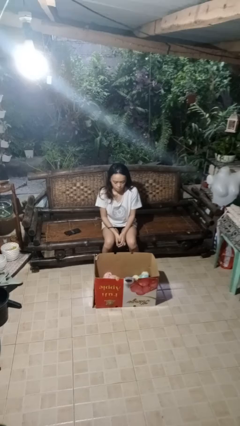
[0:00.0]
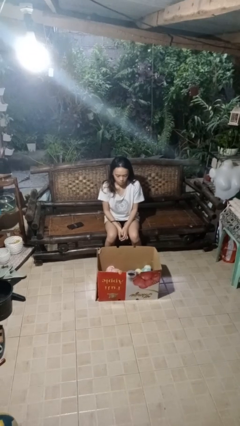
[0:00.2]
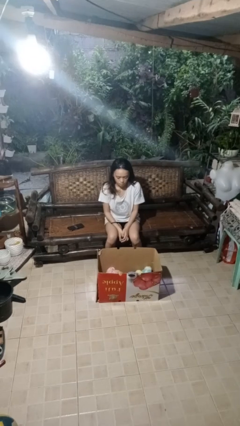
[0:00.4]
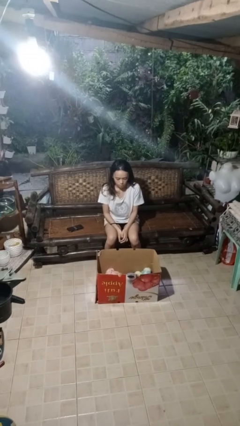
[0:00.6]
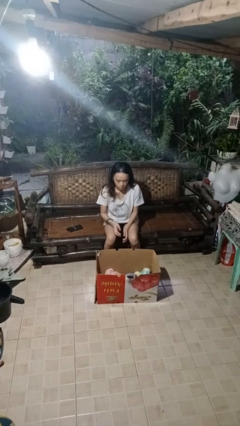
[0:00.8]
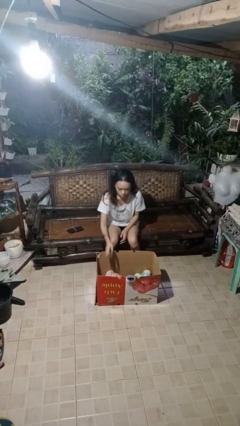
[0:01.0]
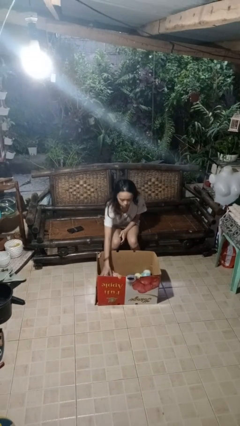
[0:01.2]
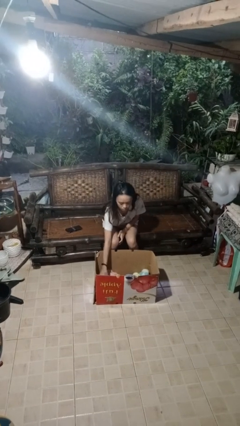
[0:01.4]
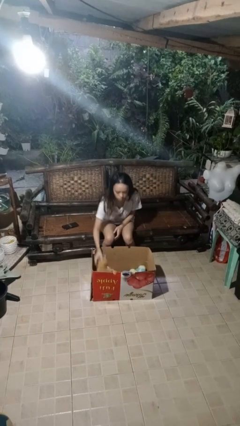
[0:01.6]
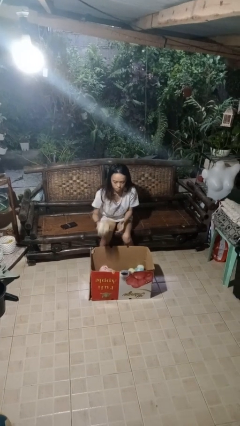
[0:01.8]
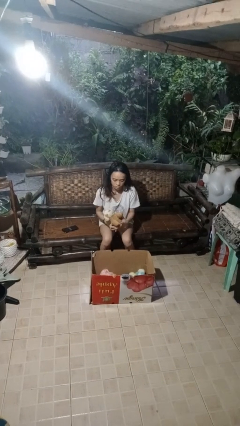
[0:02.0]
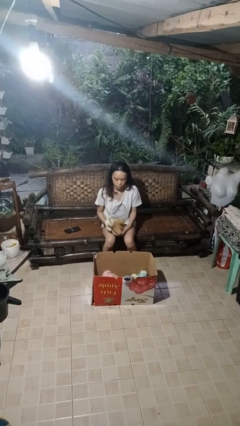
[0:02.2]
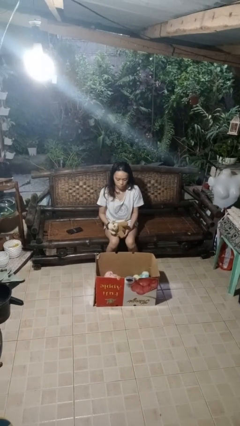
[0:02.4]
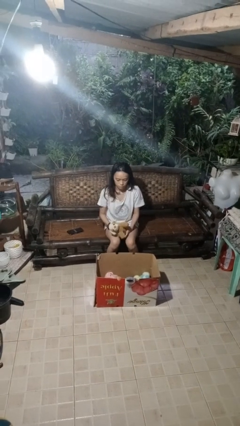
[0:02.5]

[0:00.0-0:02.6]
person takes object from box

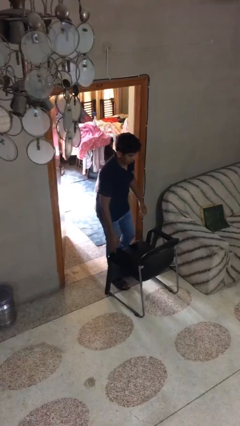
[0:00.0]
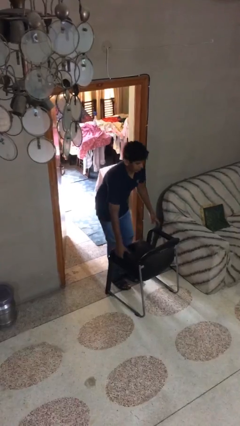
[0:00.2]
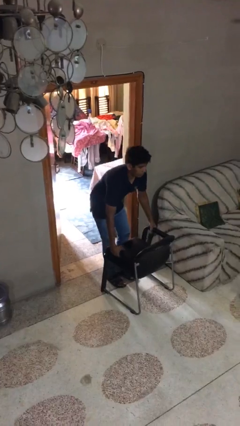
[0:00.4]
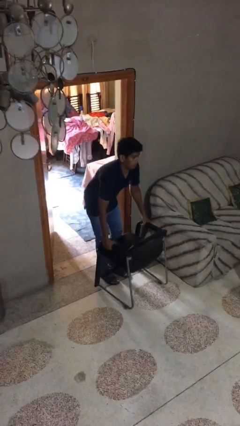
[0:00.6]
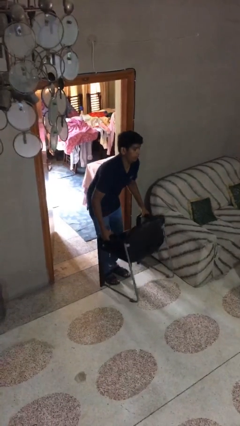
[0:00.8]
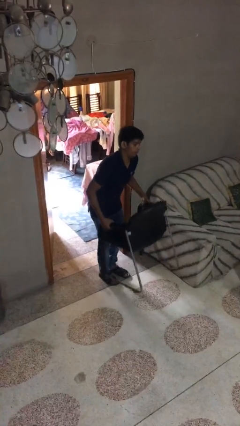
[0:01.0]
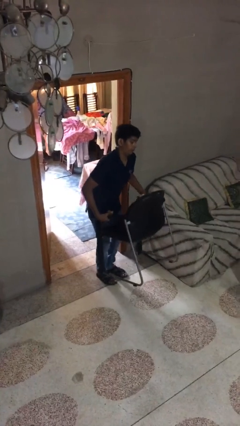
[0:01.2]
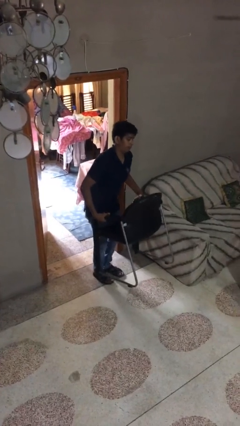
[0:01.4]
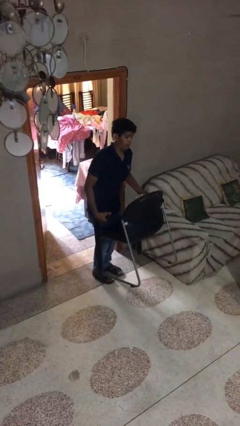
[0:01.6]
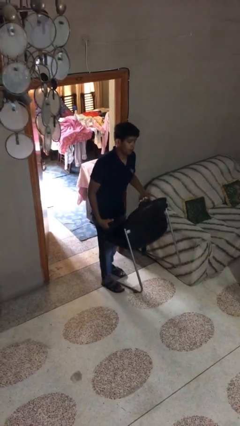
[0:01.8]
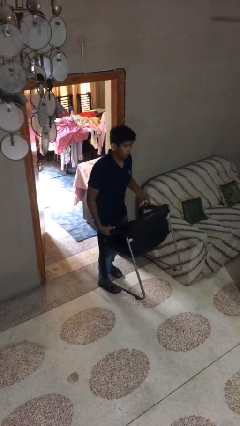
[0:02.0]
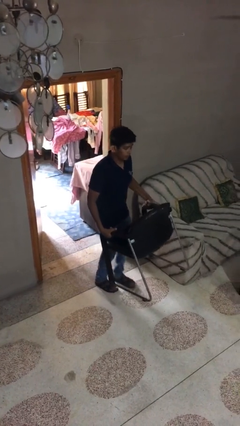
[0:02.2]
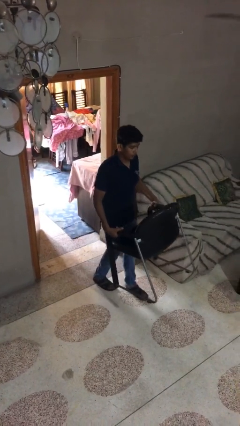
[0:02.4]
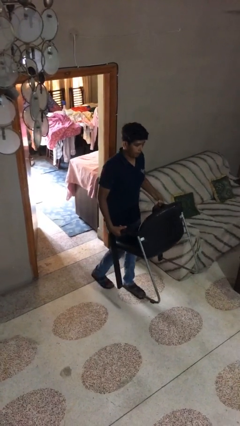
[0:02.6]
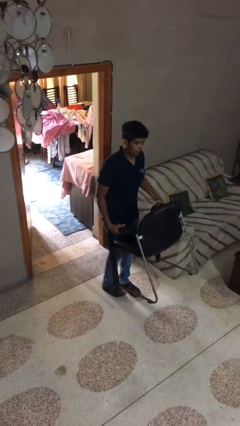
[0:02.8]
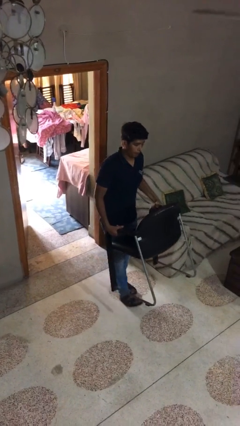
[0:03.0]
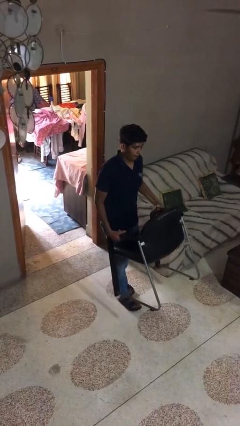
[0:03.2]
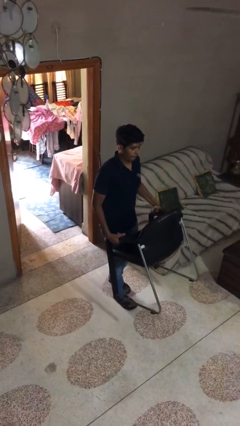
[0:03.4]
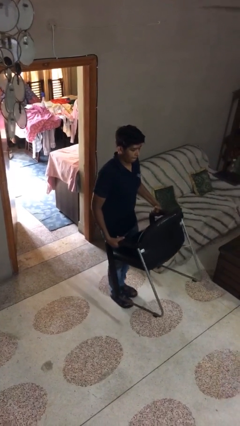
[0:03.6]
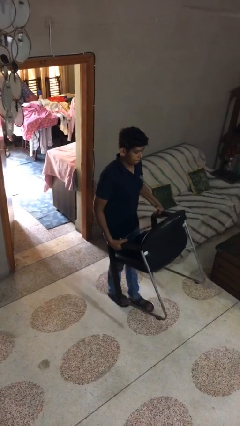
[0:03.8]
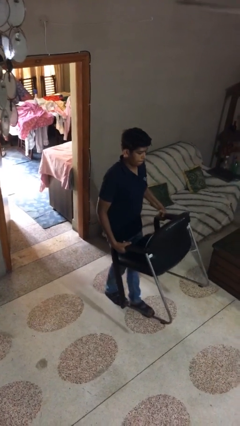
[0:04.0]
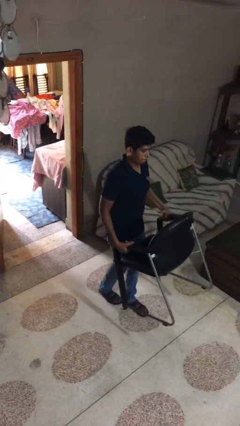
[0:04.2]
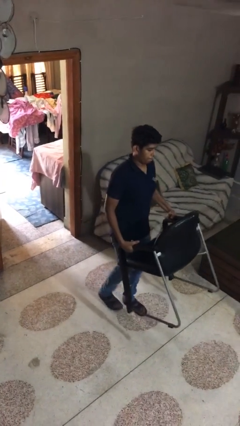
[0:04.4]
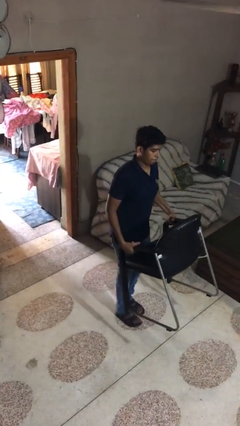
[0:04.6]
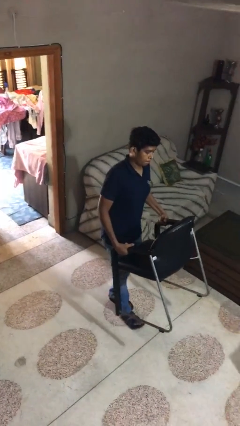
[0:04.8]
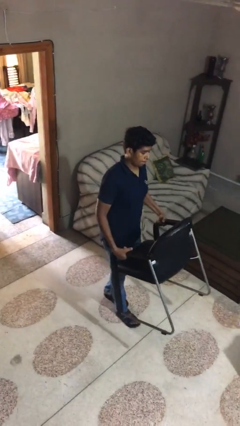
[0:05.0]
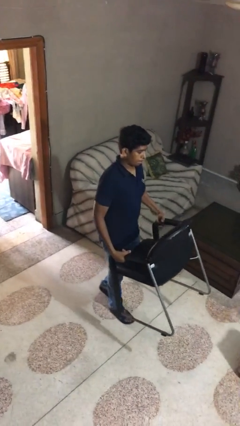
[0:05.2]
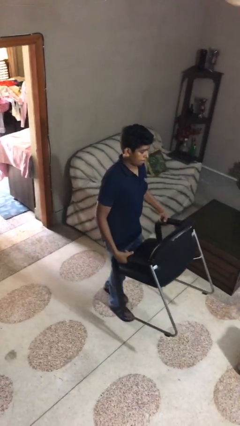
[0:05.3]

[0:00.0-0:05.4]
person carries heavy object

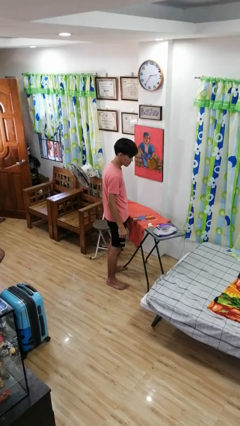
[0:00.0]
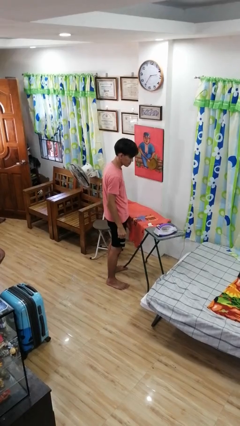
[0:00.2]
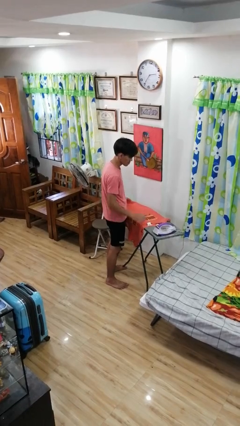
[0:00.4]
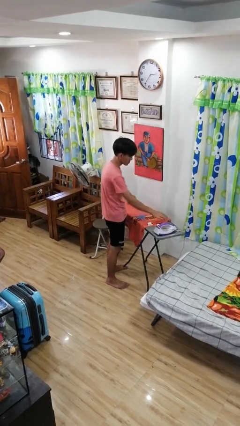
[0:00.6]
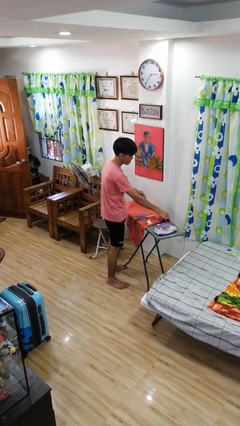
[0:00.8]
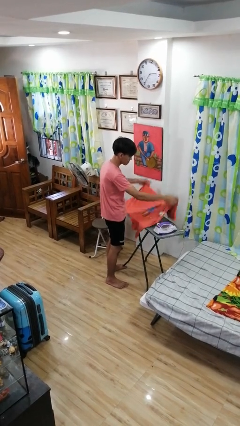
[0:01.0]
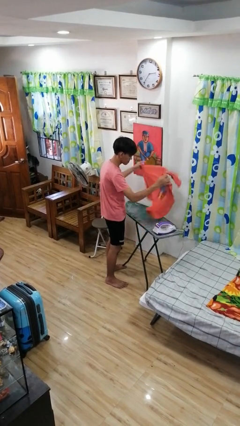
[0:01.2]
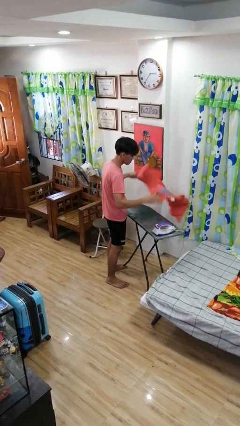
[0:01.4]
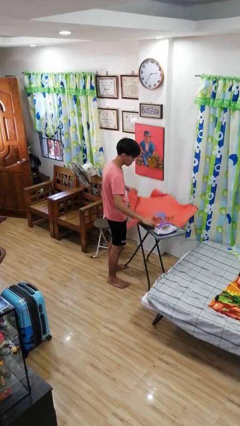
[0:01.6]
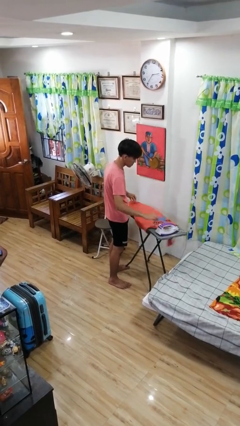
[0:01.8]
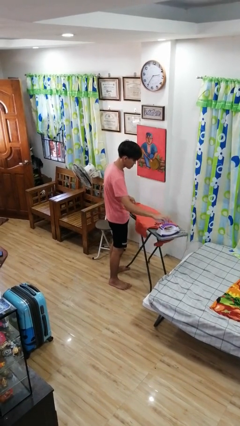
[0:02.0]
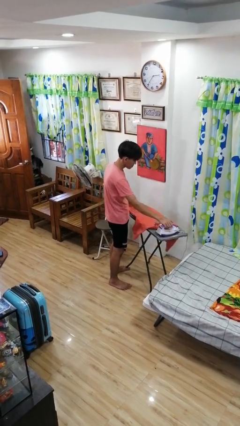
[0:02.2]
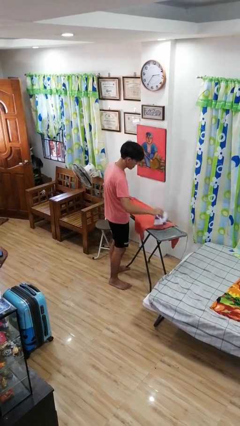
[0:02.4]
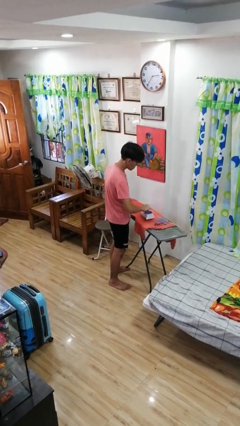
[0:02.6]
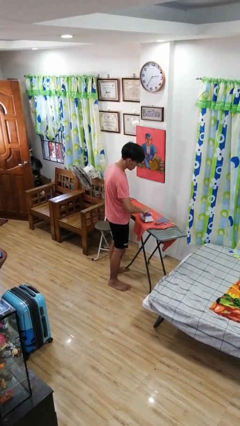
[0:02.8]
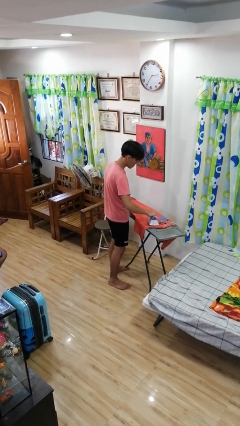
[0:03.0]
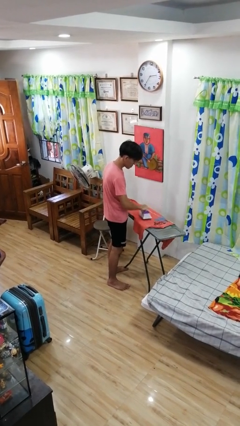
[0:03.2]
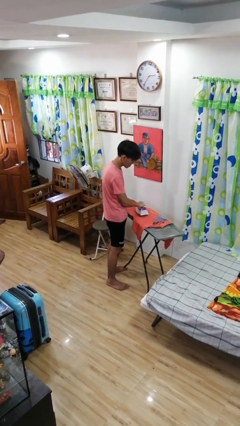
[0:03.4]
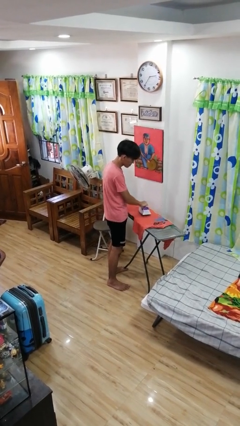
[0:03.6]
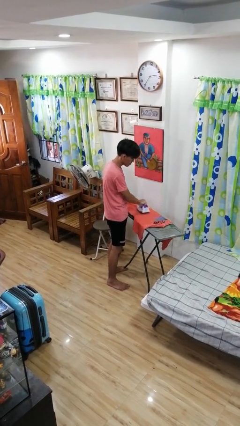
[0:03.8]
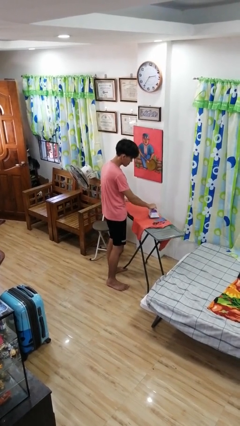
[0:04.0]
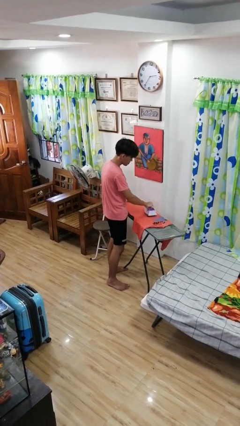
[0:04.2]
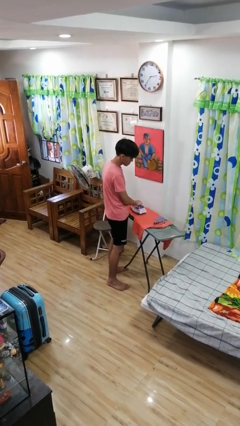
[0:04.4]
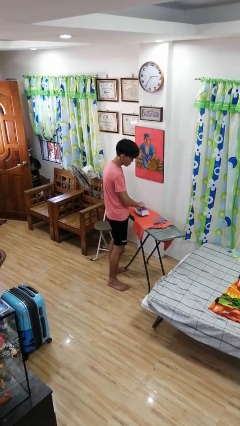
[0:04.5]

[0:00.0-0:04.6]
person irons clothes

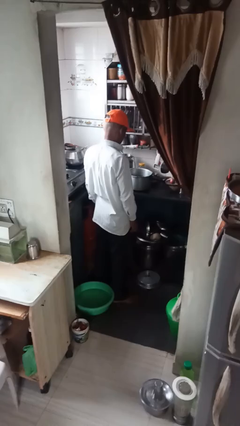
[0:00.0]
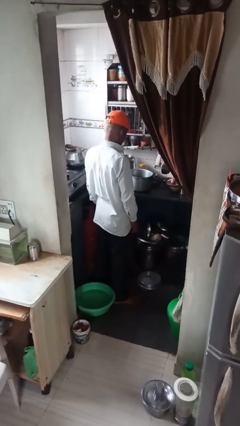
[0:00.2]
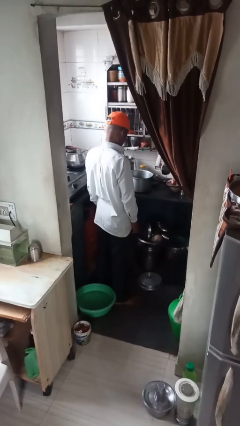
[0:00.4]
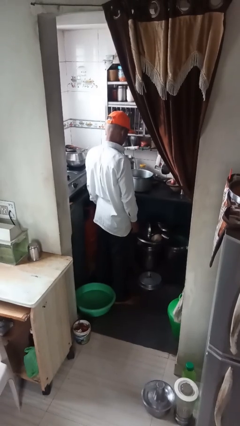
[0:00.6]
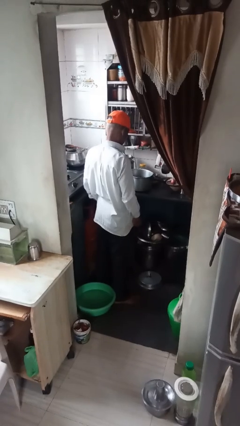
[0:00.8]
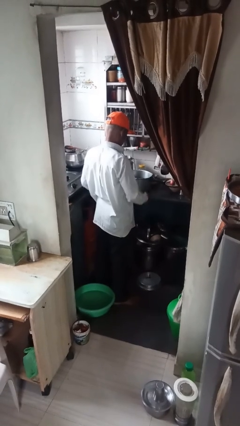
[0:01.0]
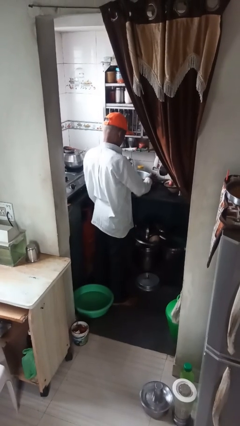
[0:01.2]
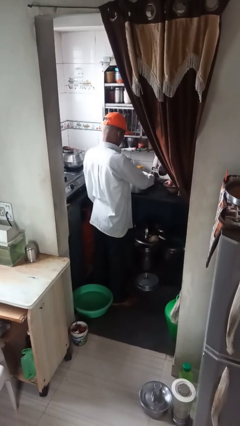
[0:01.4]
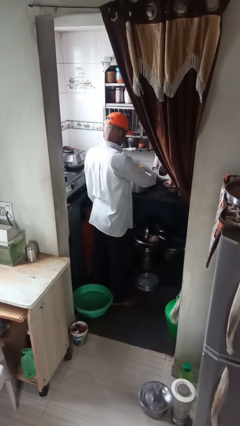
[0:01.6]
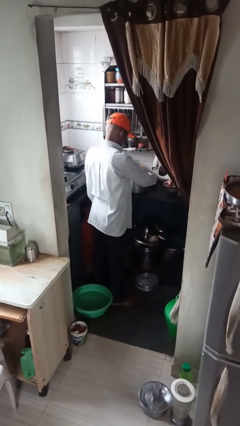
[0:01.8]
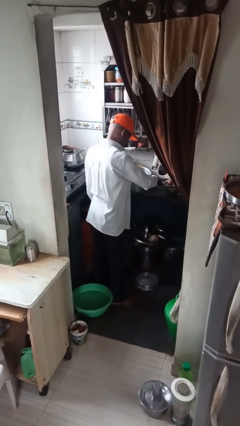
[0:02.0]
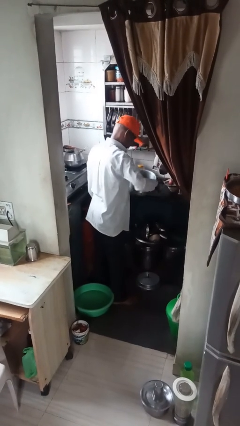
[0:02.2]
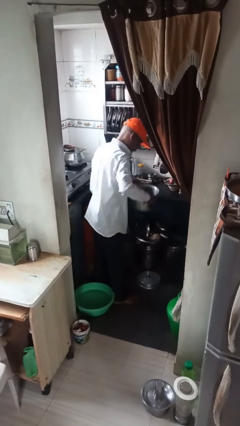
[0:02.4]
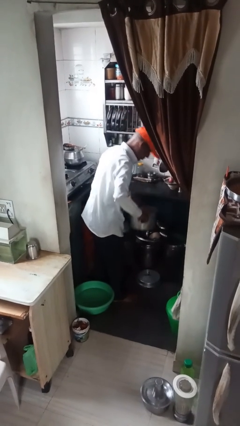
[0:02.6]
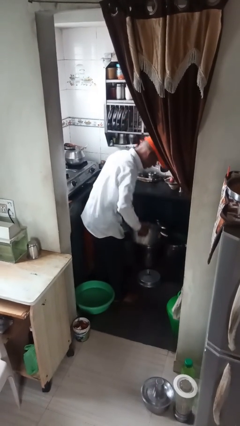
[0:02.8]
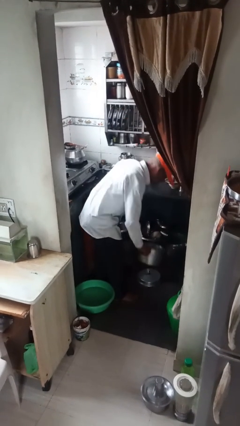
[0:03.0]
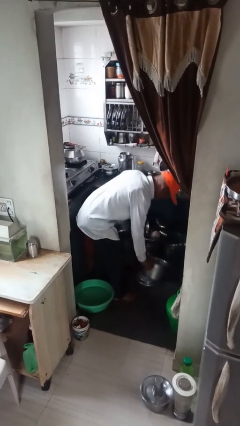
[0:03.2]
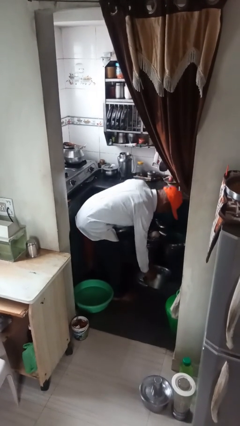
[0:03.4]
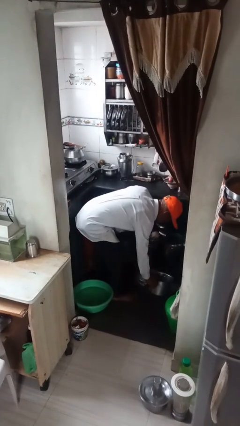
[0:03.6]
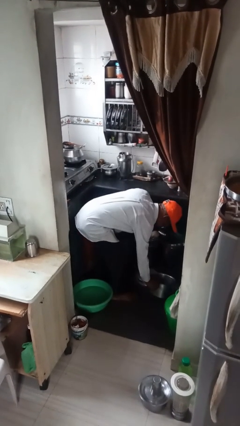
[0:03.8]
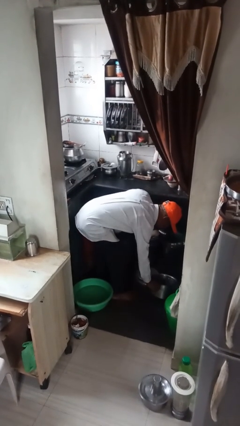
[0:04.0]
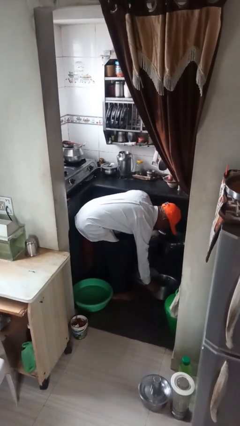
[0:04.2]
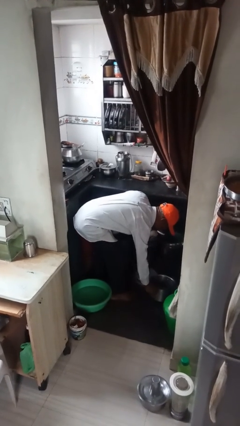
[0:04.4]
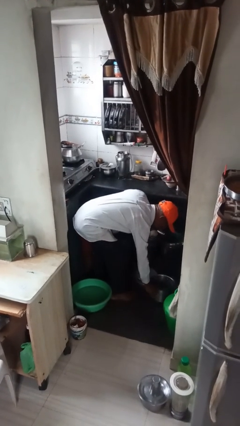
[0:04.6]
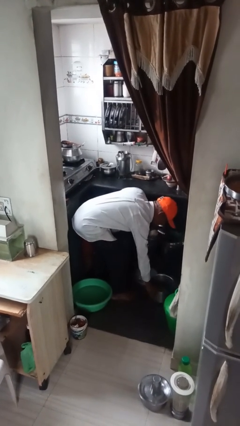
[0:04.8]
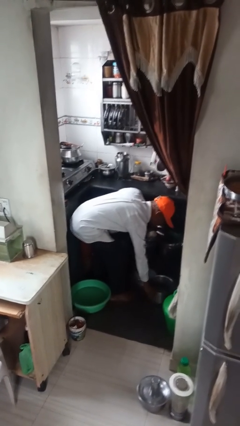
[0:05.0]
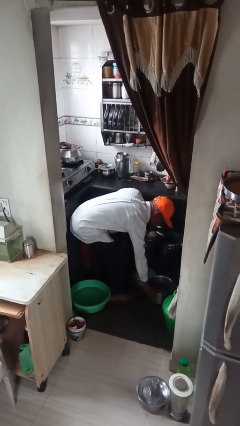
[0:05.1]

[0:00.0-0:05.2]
person puts down object on countertop

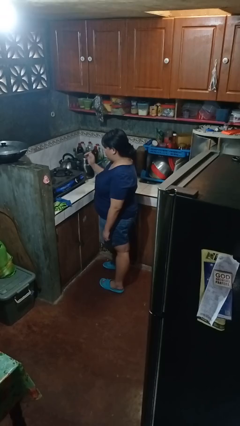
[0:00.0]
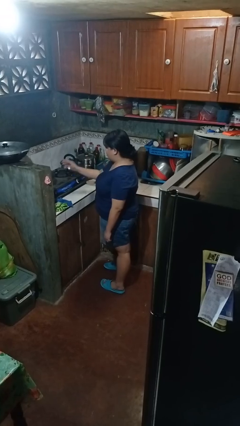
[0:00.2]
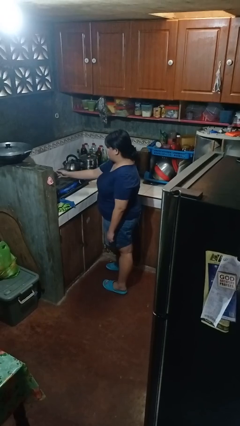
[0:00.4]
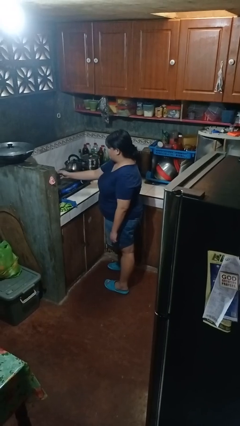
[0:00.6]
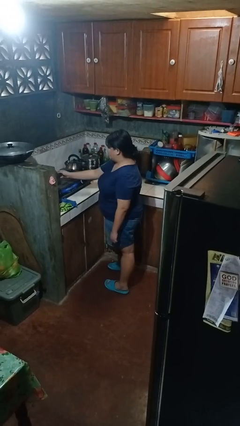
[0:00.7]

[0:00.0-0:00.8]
person burns hand
